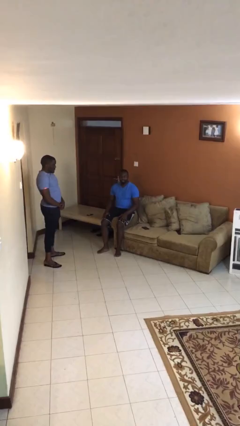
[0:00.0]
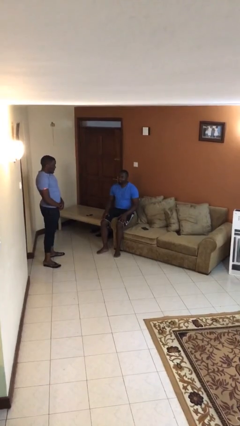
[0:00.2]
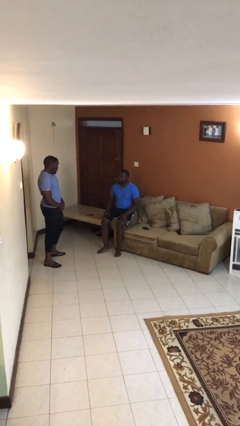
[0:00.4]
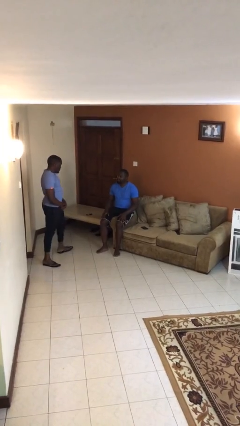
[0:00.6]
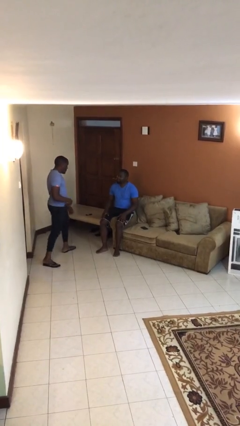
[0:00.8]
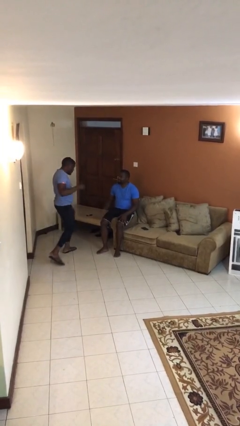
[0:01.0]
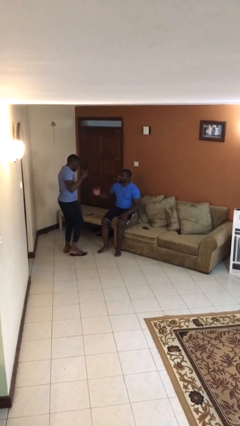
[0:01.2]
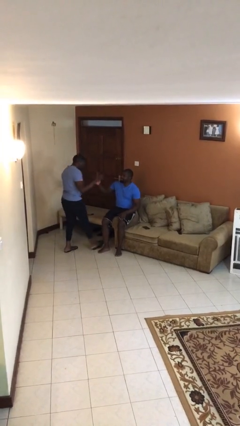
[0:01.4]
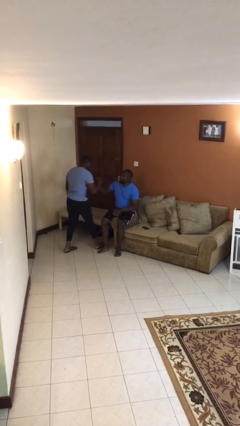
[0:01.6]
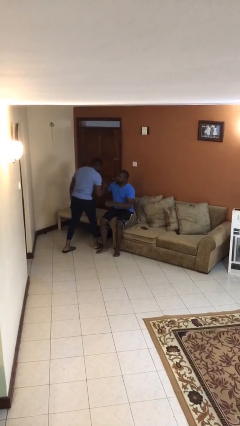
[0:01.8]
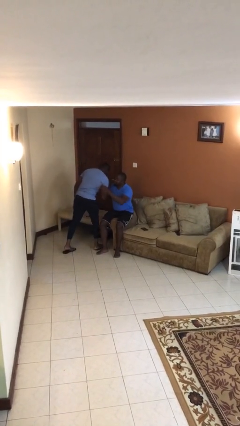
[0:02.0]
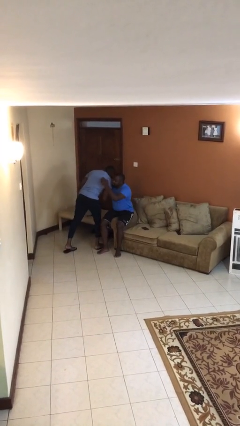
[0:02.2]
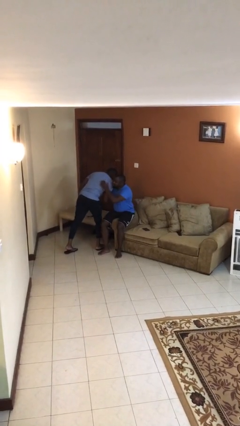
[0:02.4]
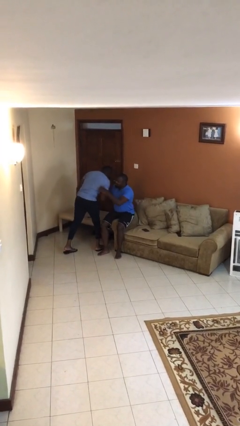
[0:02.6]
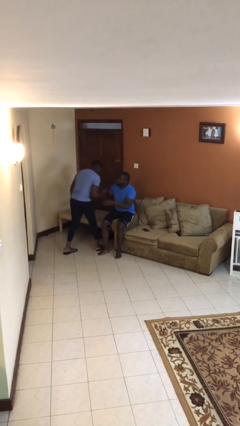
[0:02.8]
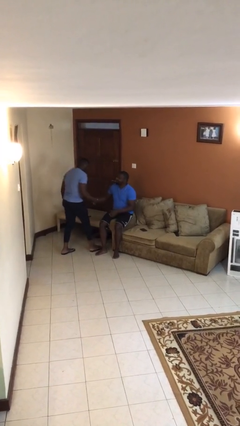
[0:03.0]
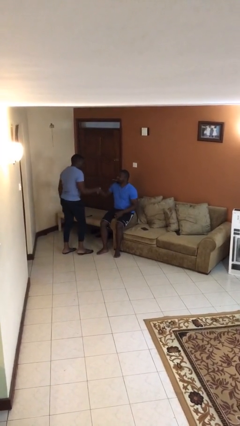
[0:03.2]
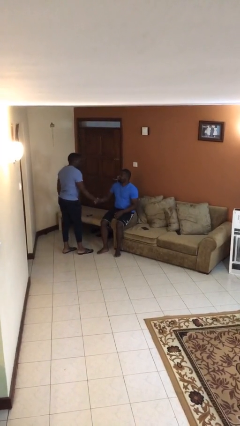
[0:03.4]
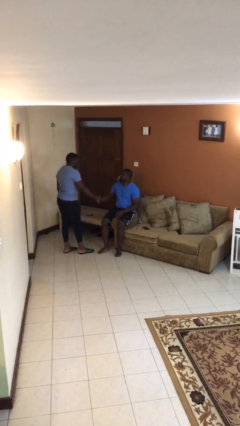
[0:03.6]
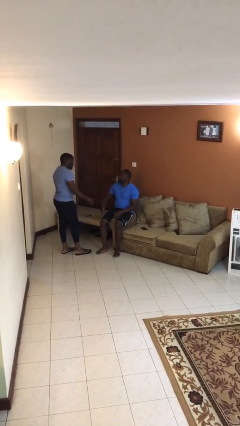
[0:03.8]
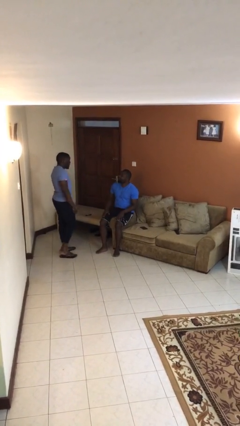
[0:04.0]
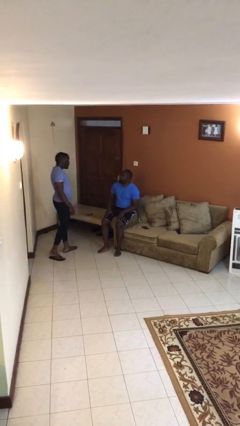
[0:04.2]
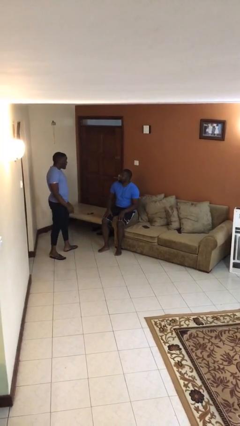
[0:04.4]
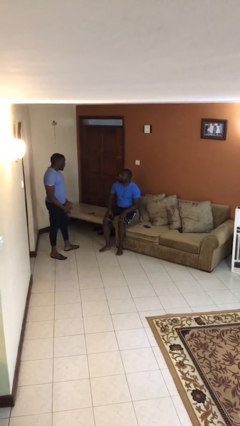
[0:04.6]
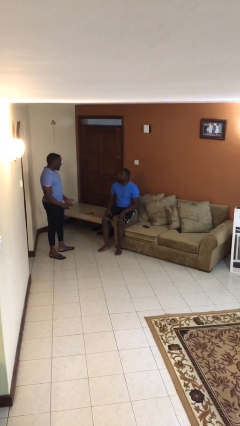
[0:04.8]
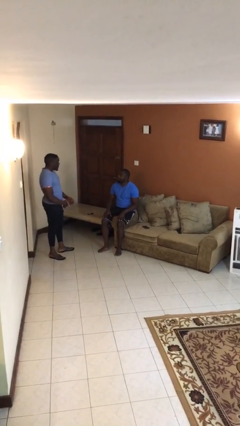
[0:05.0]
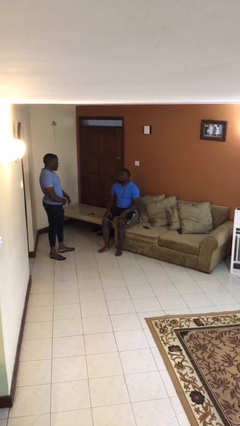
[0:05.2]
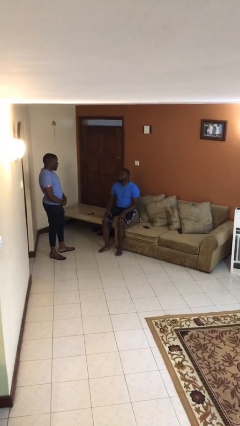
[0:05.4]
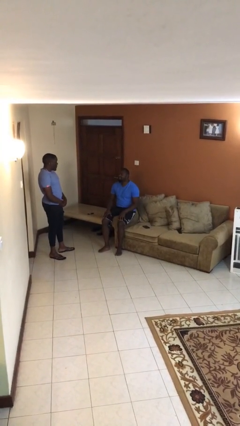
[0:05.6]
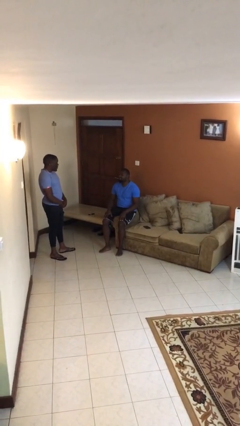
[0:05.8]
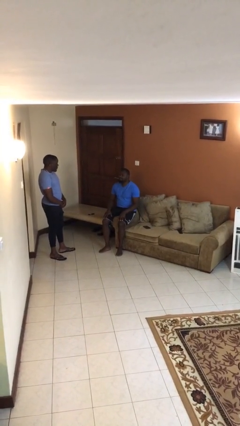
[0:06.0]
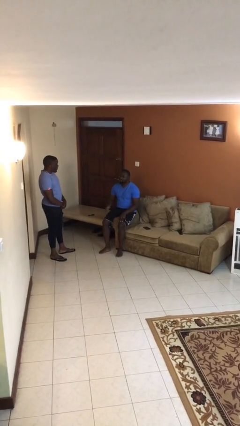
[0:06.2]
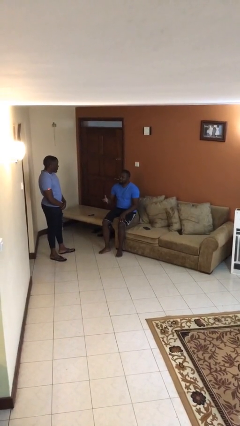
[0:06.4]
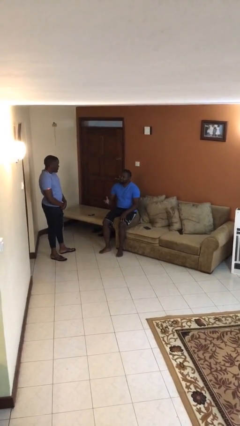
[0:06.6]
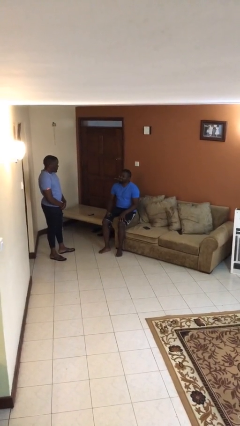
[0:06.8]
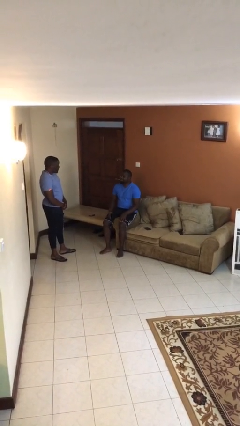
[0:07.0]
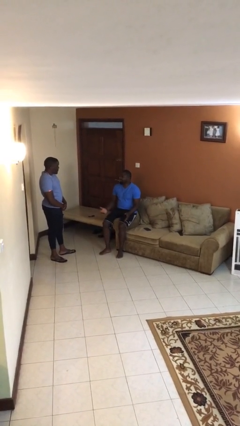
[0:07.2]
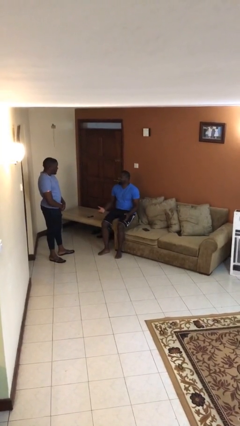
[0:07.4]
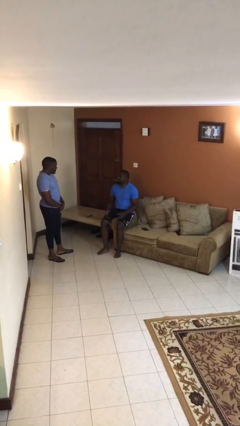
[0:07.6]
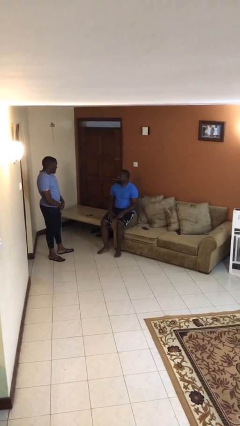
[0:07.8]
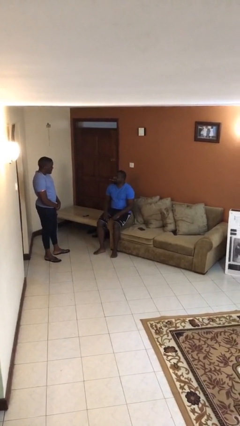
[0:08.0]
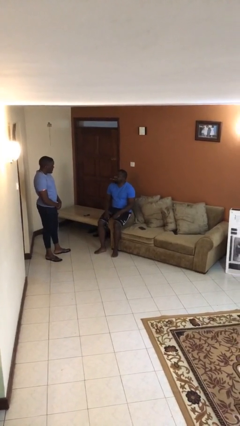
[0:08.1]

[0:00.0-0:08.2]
person embraces person

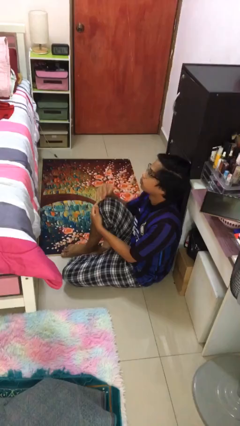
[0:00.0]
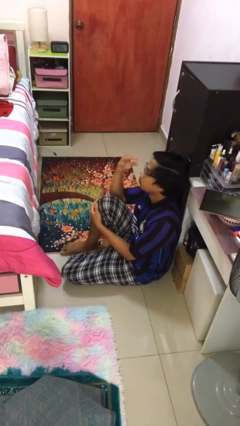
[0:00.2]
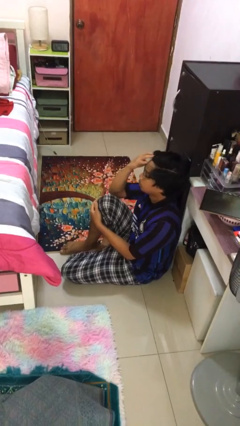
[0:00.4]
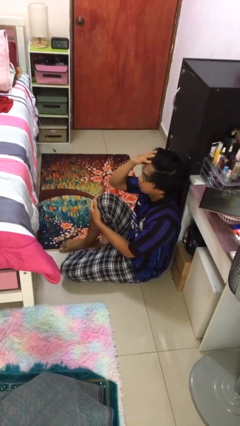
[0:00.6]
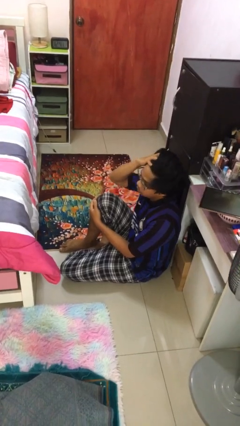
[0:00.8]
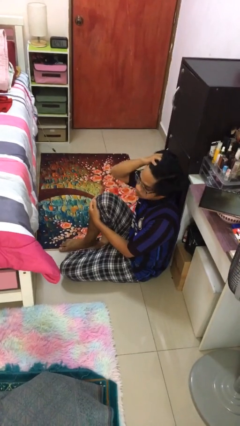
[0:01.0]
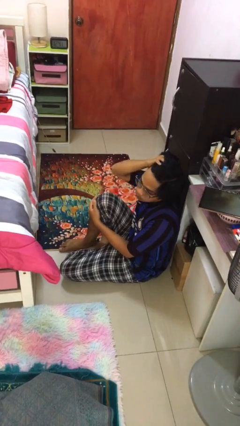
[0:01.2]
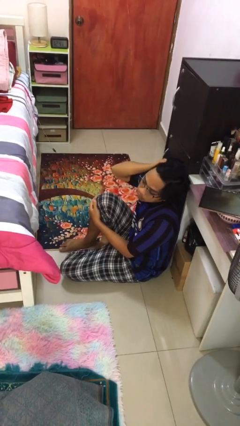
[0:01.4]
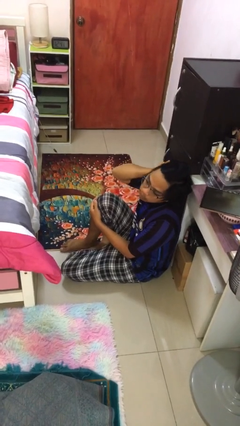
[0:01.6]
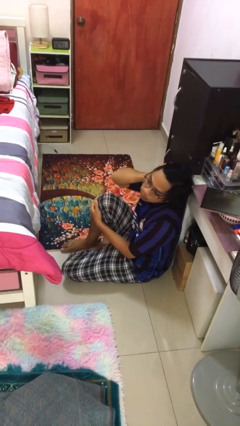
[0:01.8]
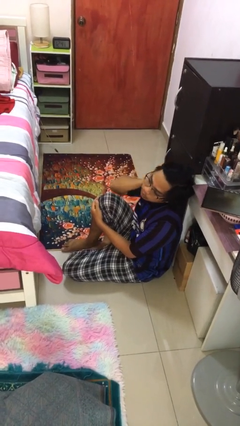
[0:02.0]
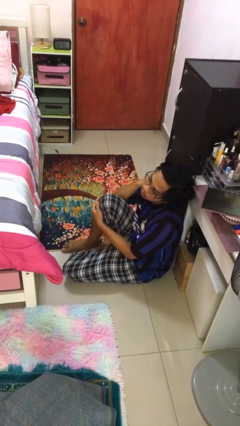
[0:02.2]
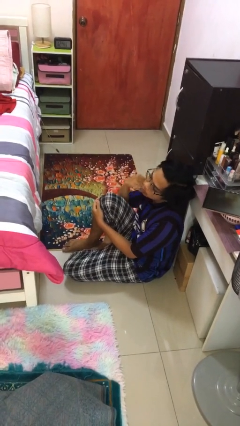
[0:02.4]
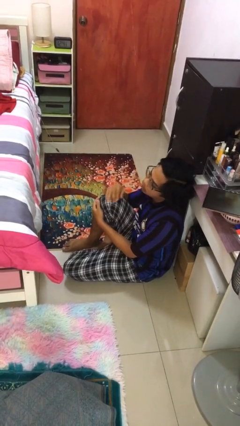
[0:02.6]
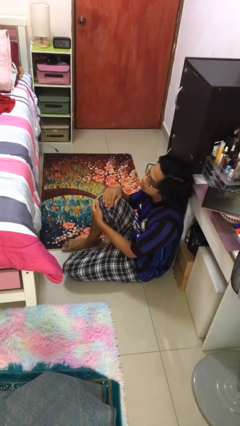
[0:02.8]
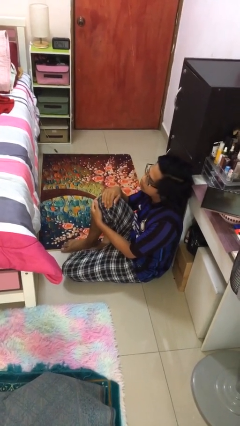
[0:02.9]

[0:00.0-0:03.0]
person strokes hair

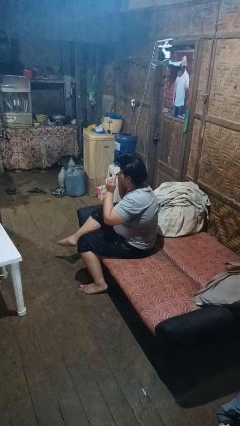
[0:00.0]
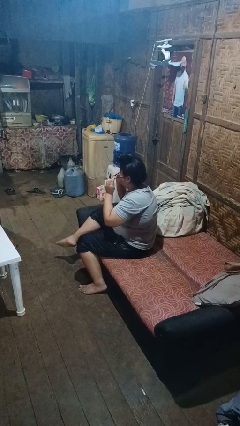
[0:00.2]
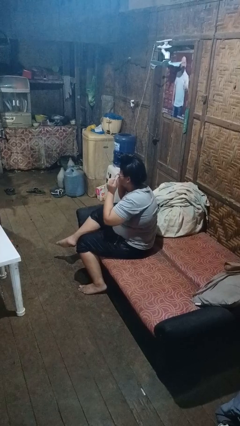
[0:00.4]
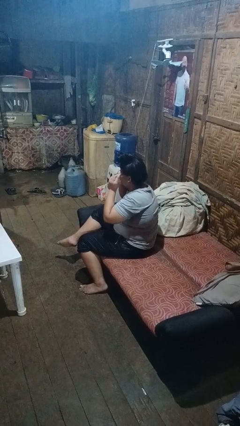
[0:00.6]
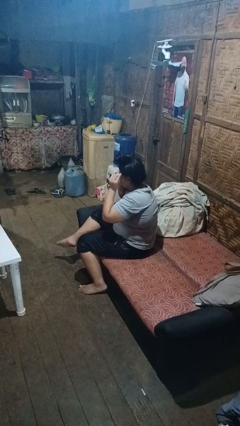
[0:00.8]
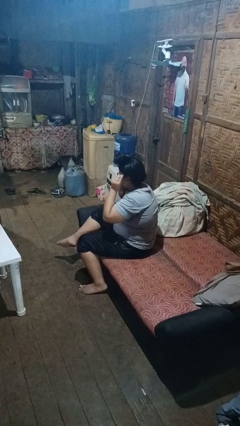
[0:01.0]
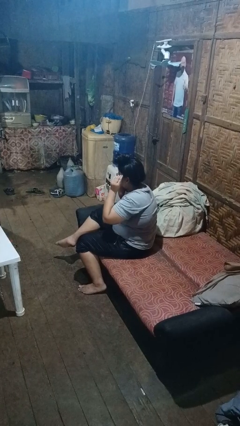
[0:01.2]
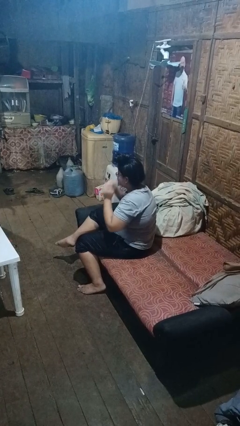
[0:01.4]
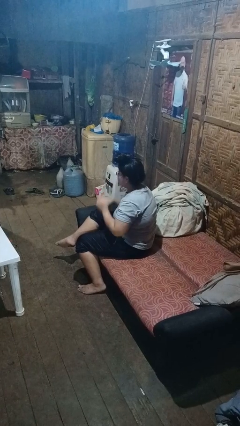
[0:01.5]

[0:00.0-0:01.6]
person puts on glasses

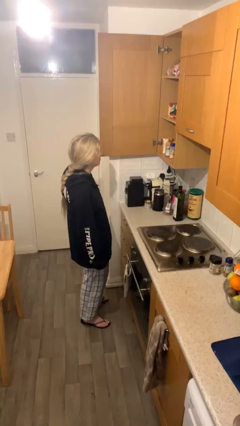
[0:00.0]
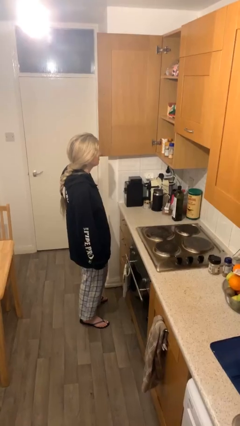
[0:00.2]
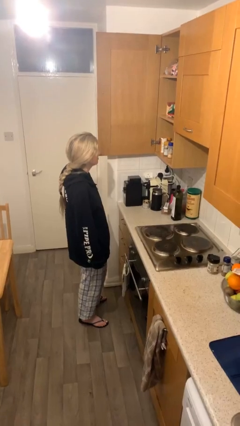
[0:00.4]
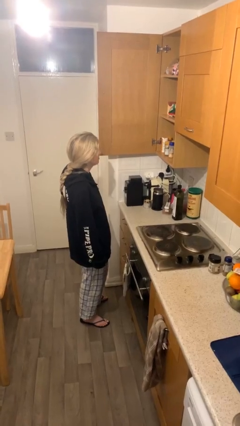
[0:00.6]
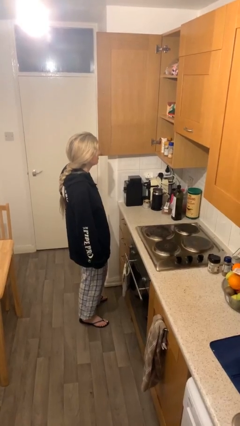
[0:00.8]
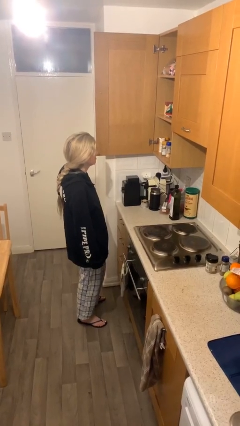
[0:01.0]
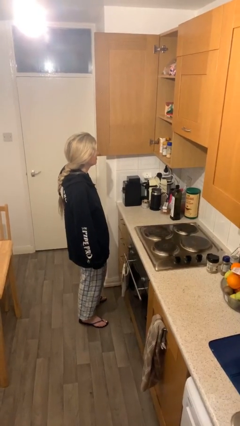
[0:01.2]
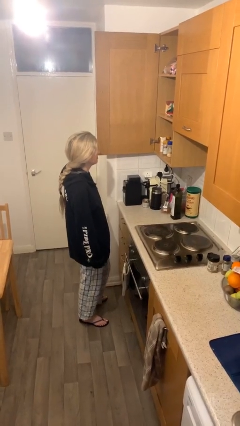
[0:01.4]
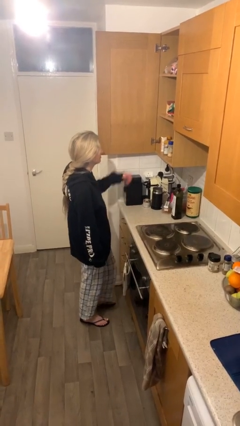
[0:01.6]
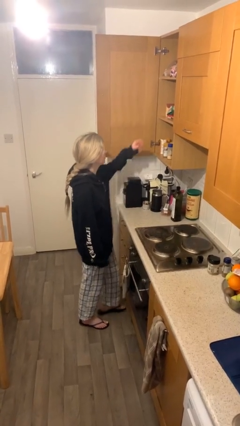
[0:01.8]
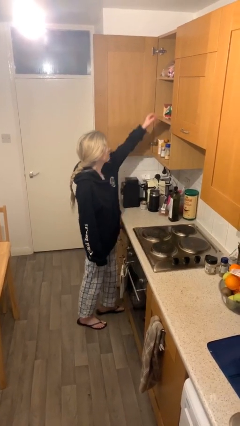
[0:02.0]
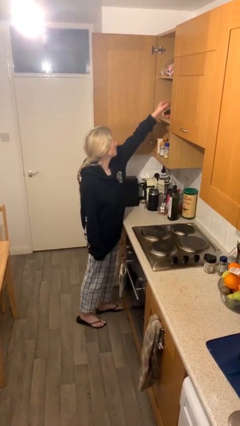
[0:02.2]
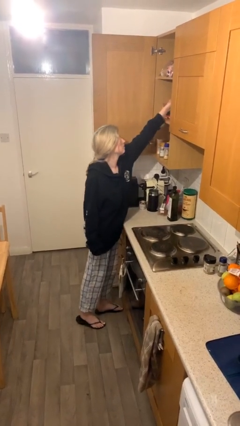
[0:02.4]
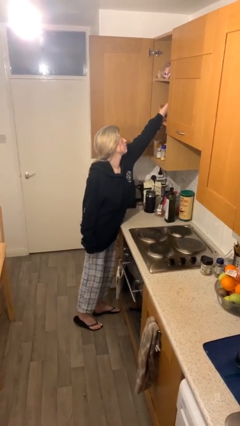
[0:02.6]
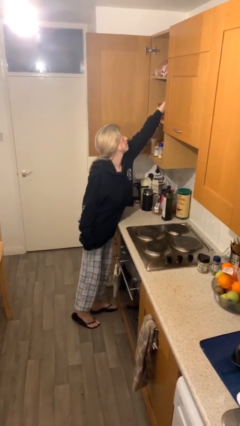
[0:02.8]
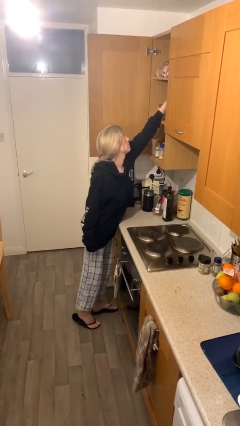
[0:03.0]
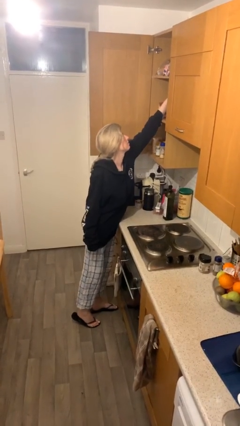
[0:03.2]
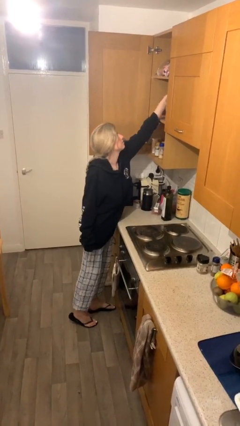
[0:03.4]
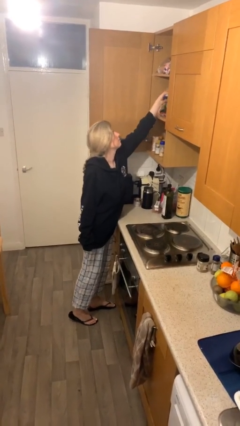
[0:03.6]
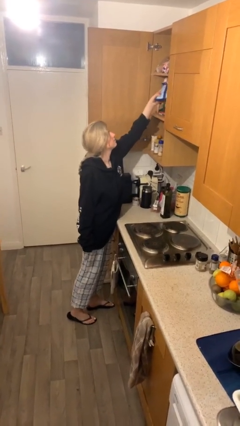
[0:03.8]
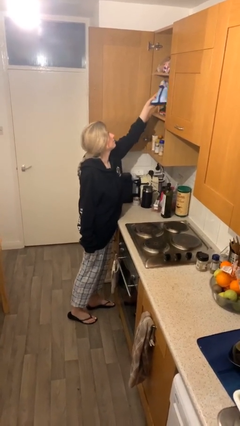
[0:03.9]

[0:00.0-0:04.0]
person picks up object from shelf

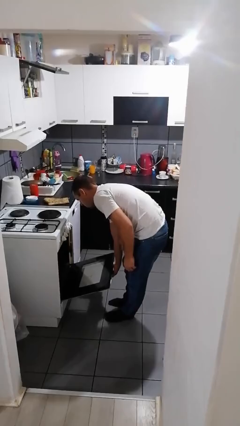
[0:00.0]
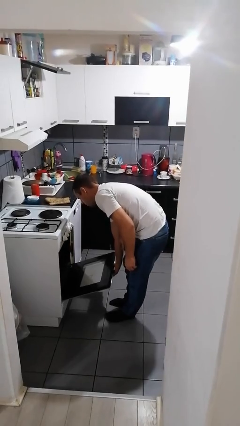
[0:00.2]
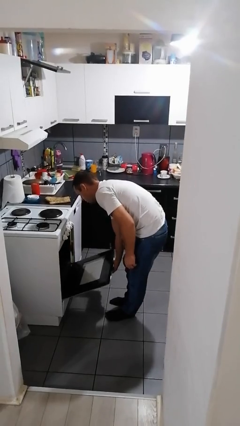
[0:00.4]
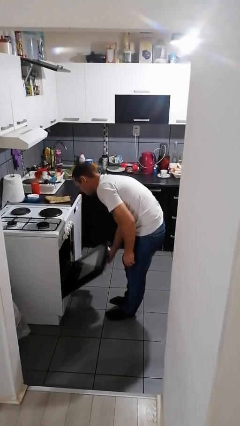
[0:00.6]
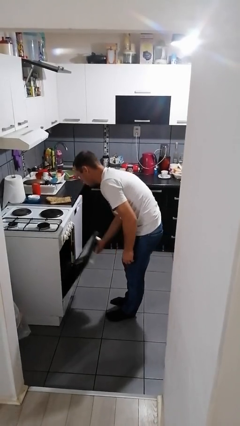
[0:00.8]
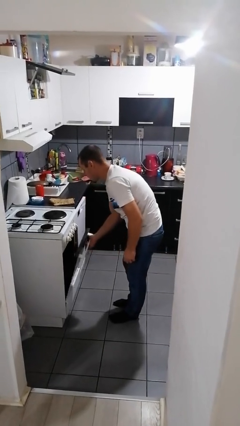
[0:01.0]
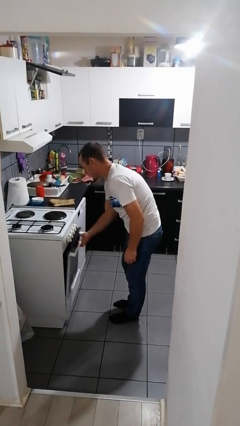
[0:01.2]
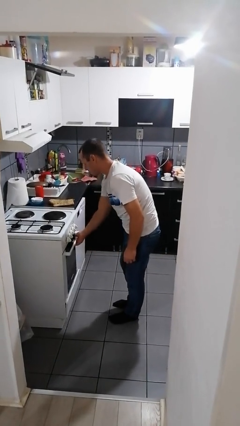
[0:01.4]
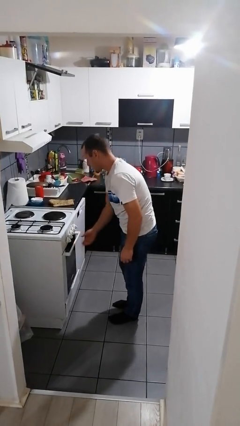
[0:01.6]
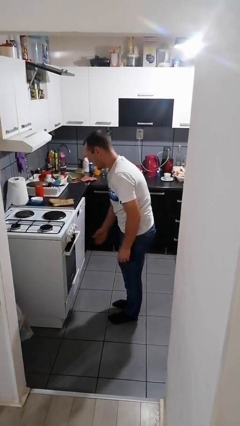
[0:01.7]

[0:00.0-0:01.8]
person closes oven door
